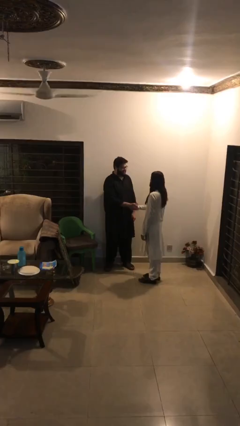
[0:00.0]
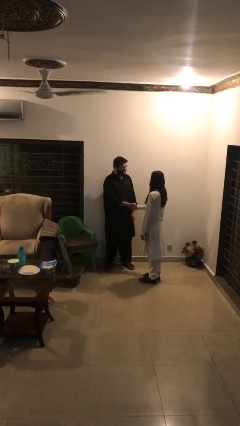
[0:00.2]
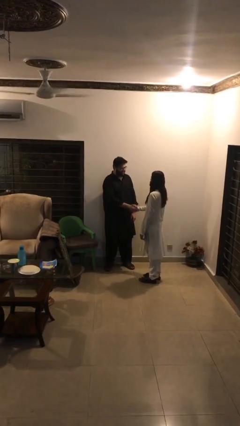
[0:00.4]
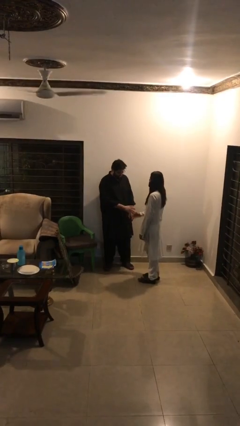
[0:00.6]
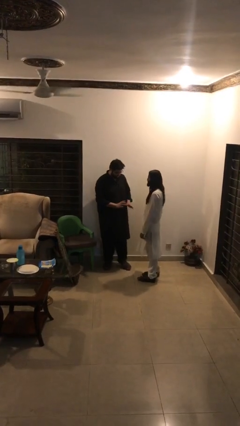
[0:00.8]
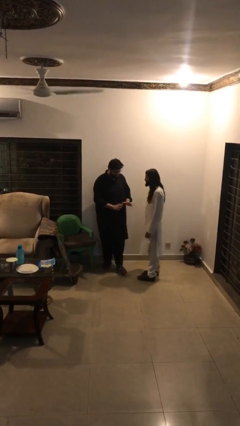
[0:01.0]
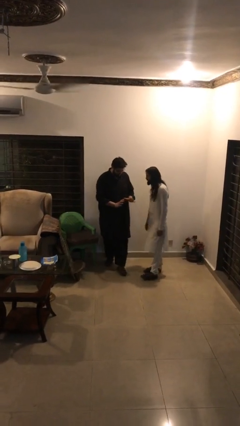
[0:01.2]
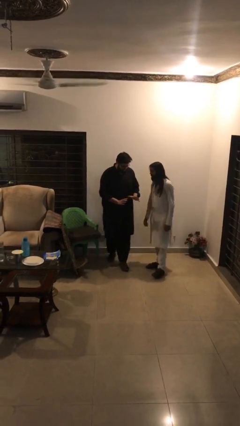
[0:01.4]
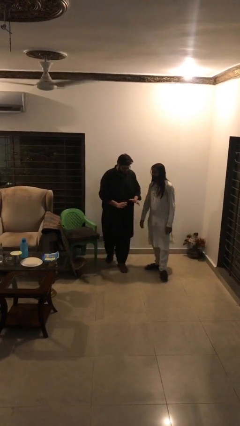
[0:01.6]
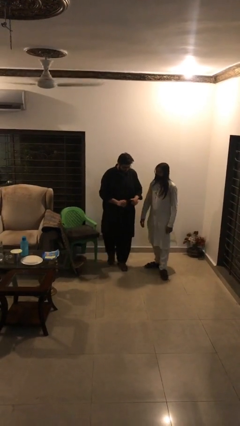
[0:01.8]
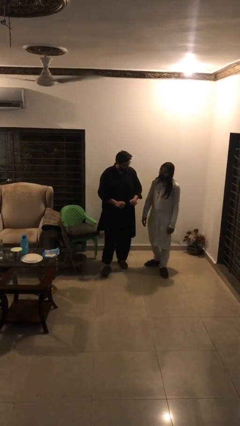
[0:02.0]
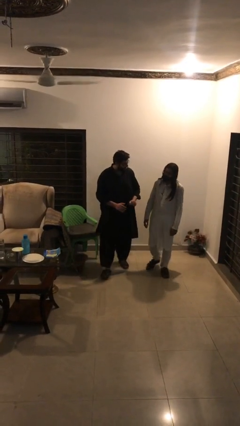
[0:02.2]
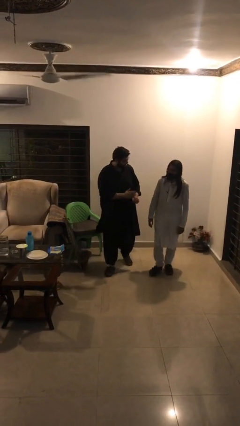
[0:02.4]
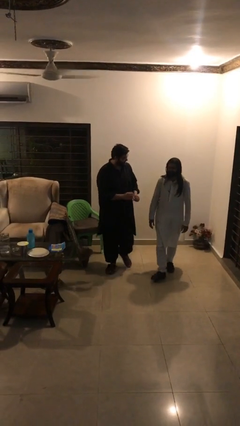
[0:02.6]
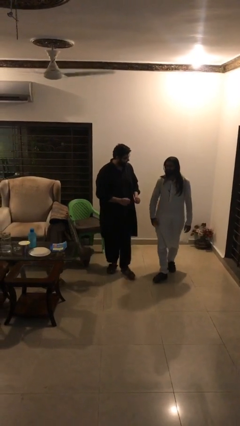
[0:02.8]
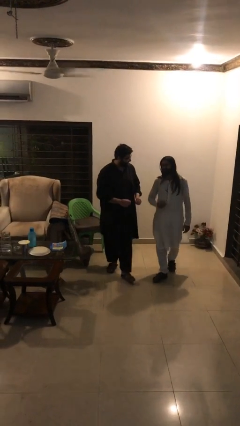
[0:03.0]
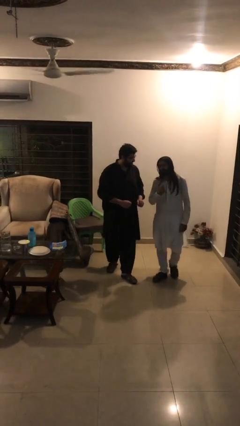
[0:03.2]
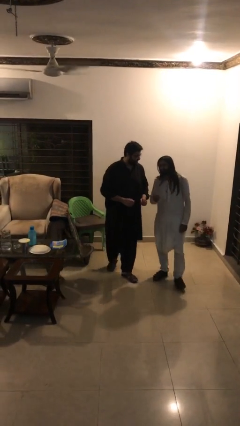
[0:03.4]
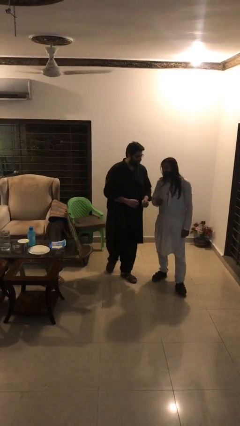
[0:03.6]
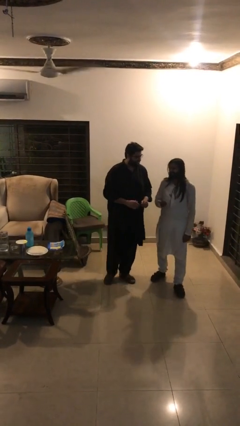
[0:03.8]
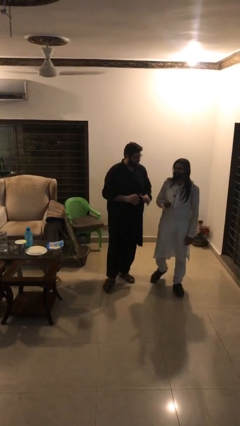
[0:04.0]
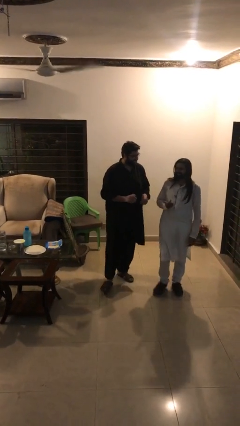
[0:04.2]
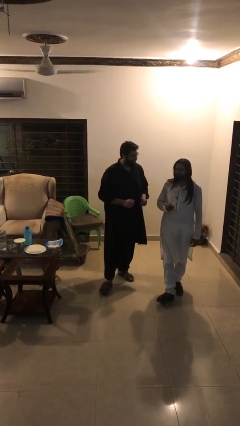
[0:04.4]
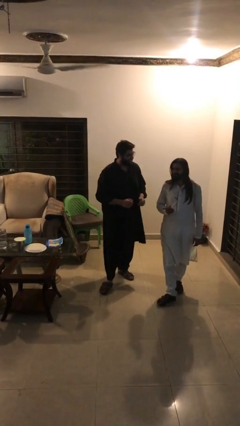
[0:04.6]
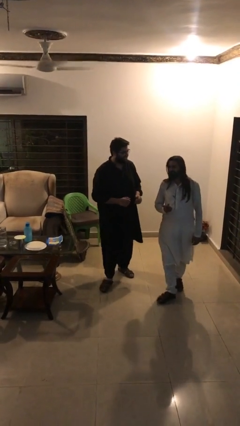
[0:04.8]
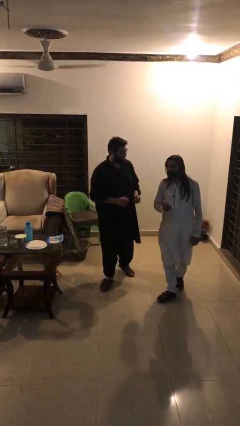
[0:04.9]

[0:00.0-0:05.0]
person talks to person

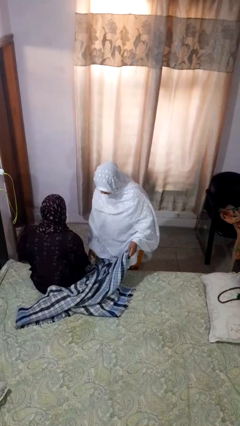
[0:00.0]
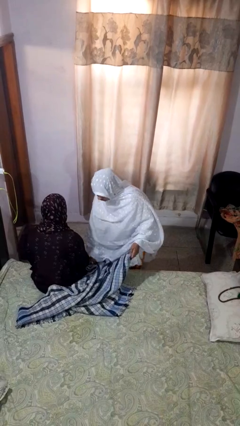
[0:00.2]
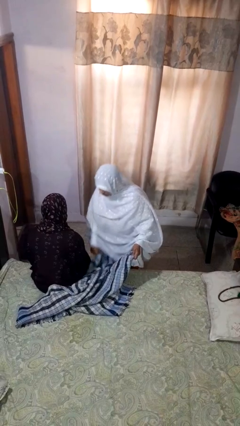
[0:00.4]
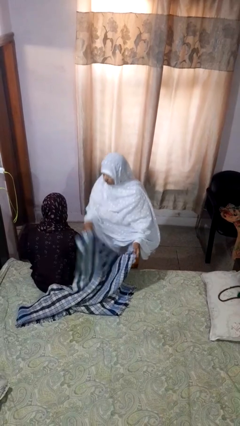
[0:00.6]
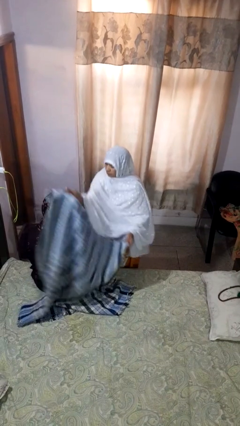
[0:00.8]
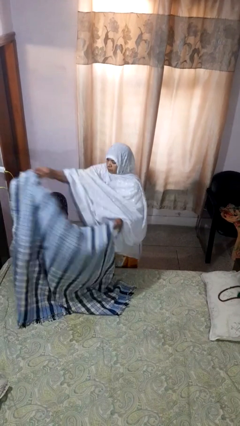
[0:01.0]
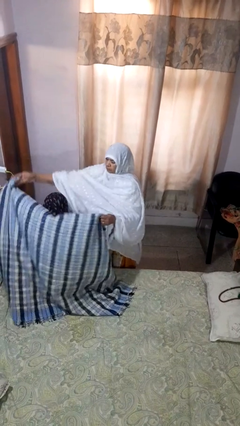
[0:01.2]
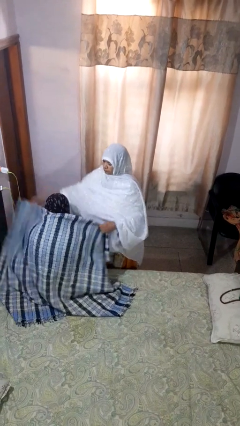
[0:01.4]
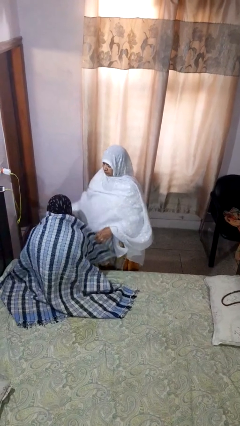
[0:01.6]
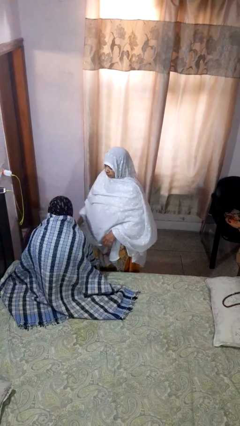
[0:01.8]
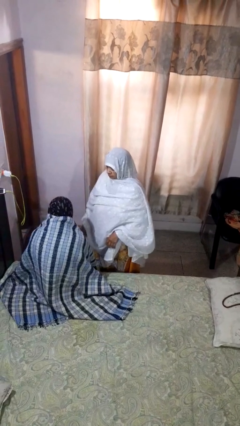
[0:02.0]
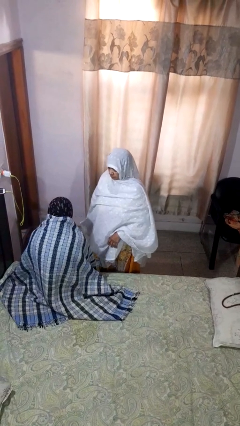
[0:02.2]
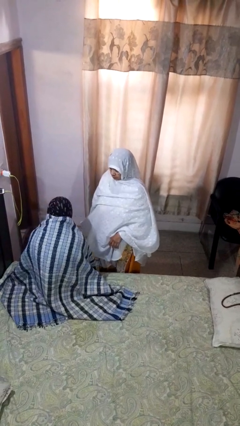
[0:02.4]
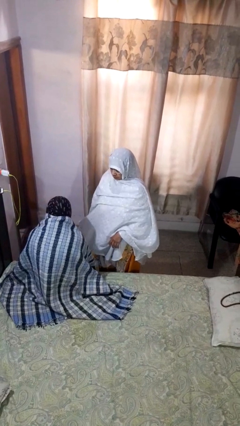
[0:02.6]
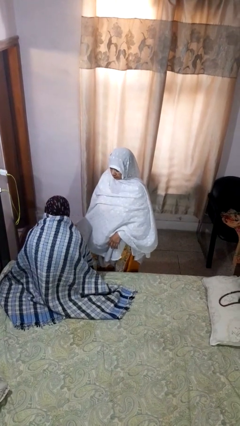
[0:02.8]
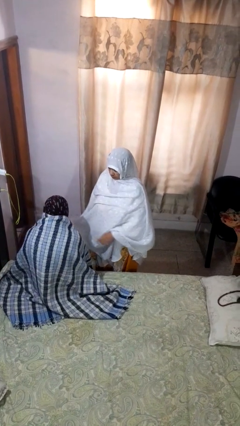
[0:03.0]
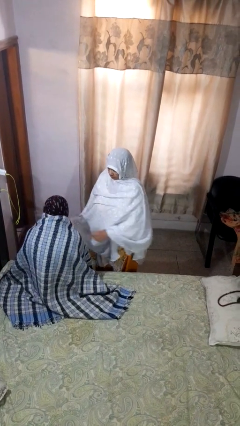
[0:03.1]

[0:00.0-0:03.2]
person covers friend with blanket

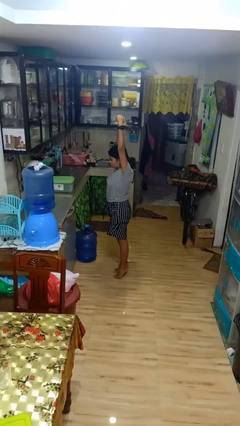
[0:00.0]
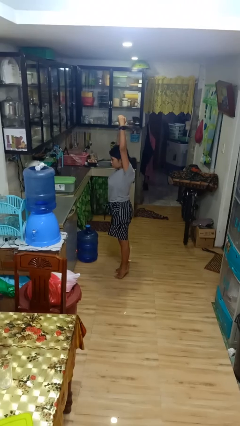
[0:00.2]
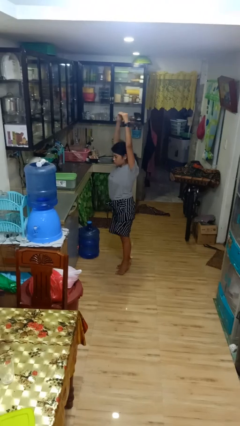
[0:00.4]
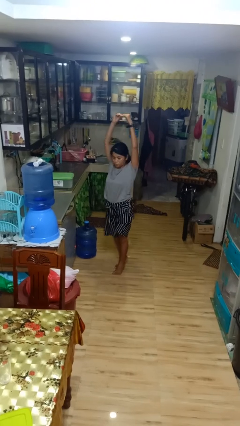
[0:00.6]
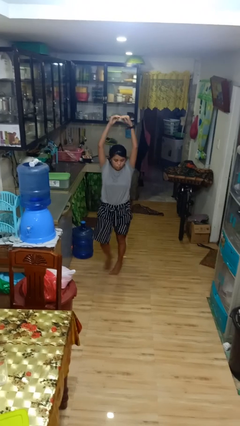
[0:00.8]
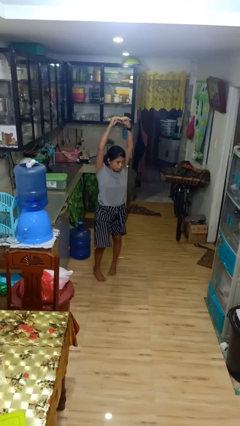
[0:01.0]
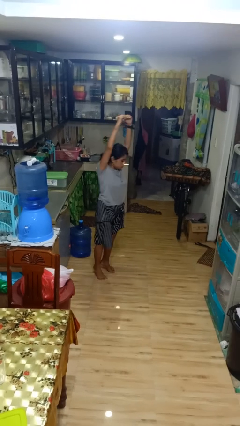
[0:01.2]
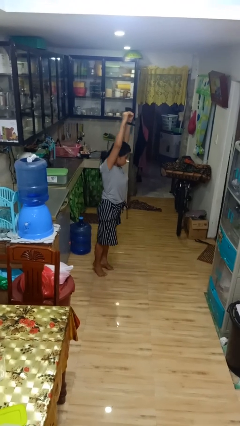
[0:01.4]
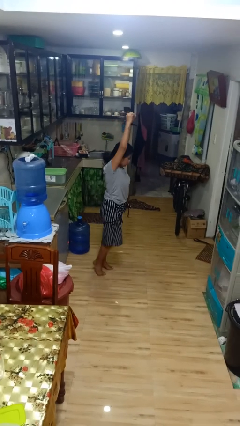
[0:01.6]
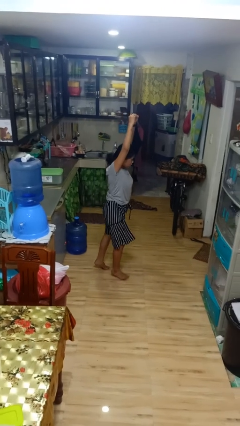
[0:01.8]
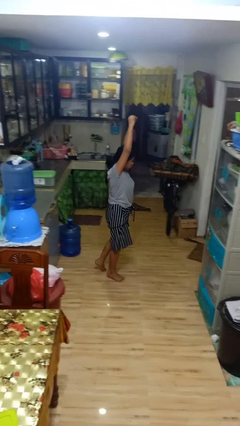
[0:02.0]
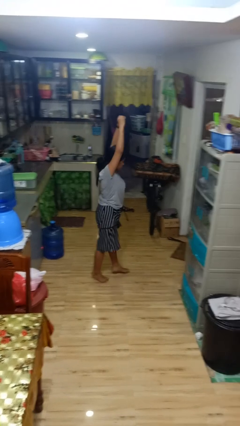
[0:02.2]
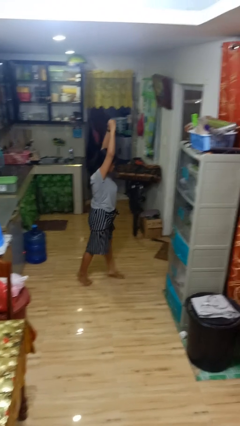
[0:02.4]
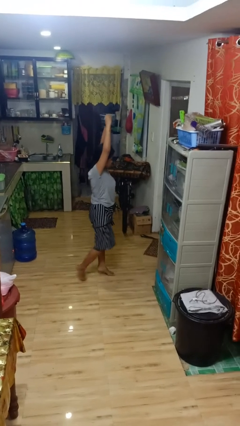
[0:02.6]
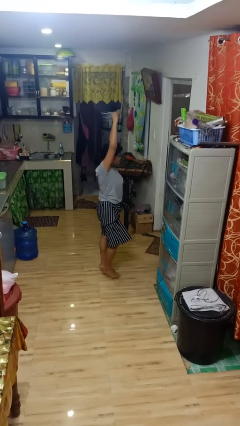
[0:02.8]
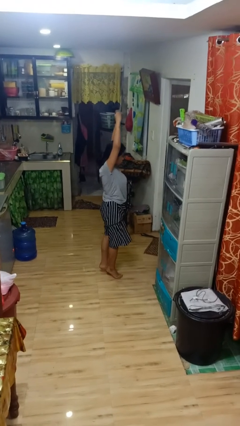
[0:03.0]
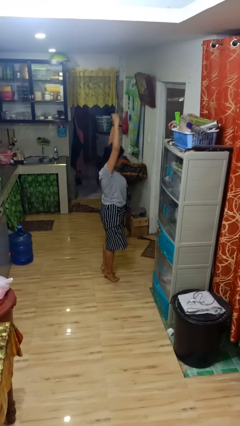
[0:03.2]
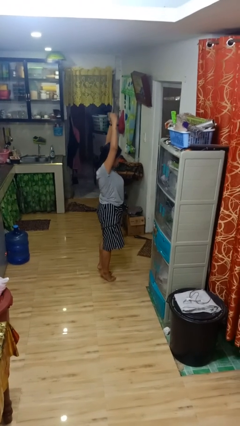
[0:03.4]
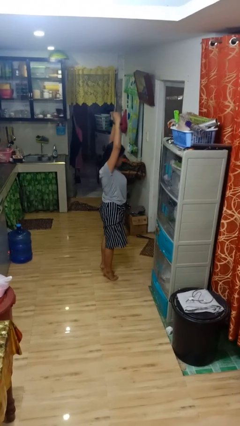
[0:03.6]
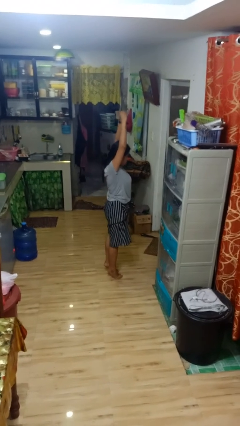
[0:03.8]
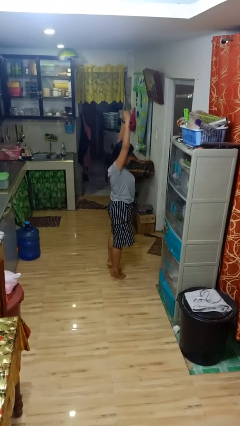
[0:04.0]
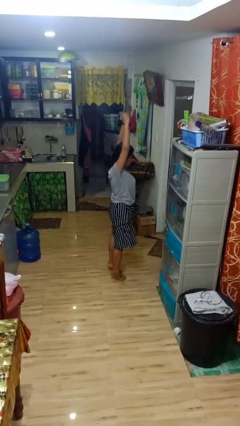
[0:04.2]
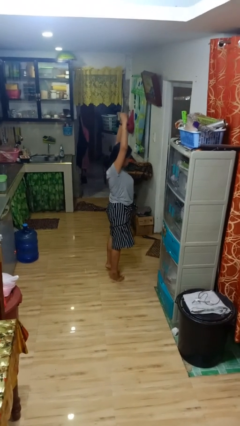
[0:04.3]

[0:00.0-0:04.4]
person walks tiptoe

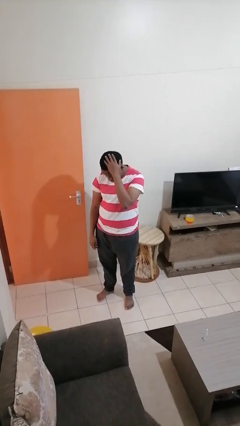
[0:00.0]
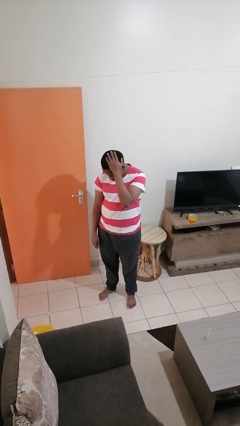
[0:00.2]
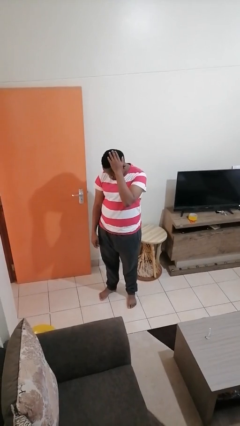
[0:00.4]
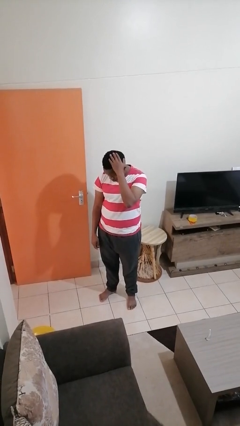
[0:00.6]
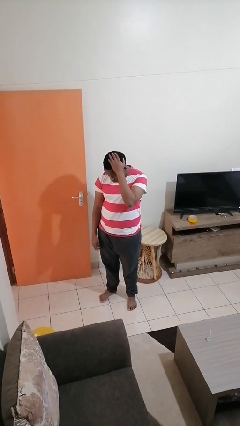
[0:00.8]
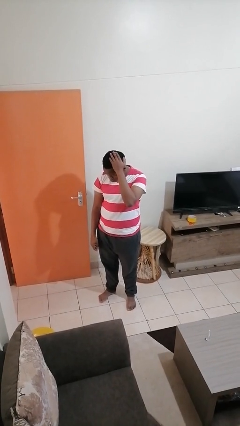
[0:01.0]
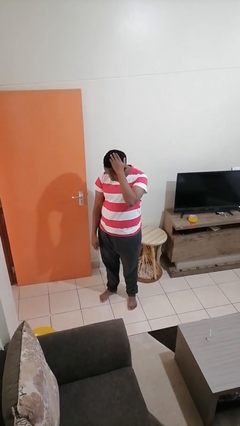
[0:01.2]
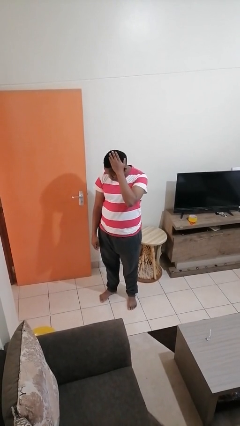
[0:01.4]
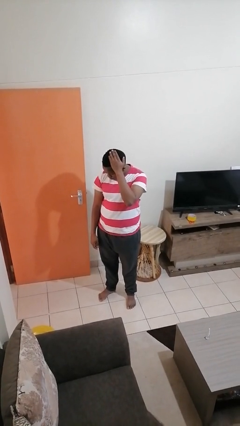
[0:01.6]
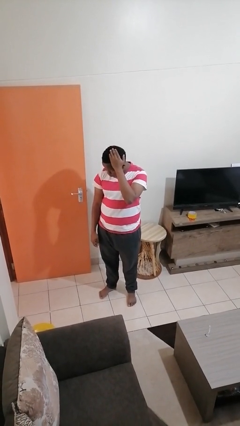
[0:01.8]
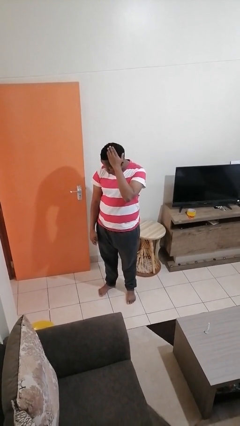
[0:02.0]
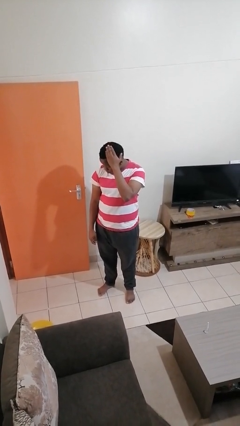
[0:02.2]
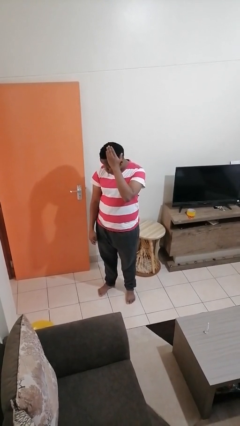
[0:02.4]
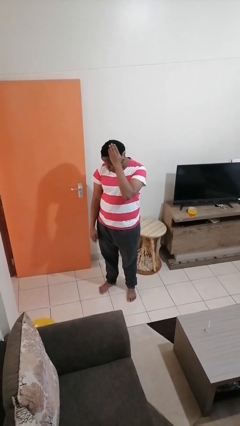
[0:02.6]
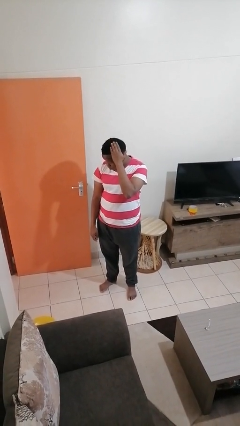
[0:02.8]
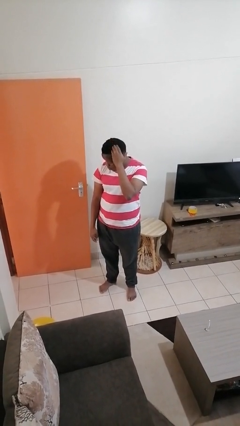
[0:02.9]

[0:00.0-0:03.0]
person pats head

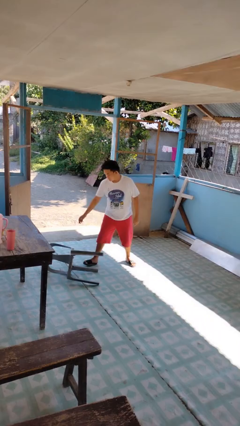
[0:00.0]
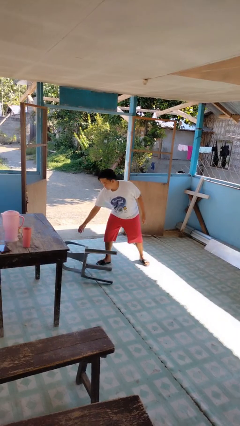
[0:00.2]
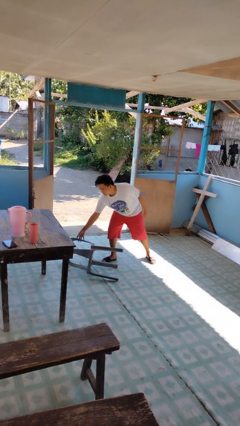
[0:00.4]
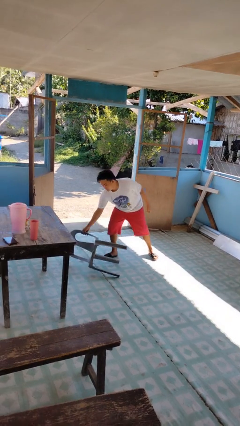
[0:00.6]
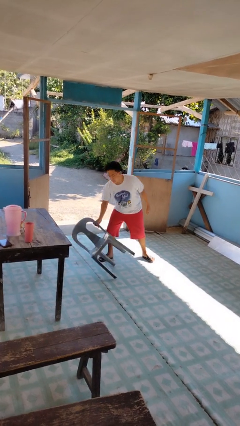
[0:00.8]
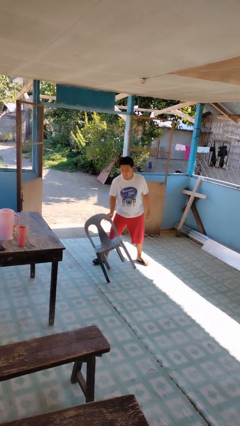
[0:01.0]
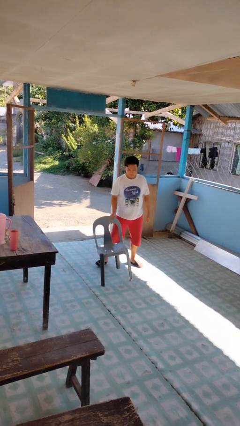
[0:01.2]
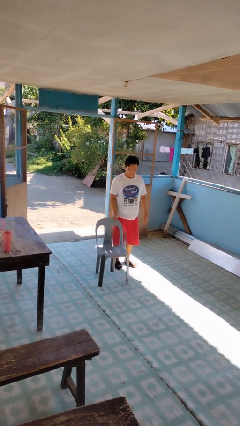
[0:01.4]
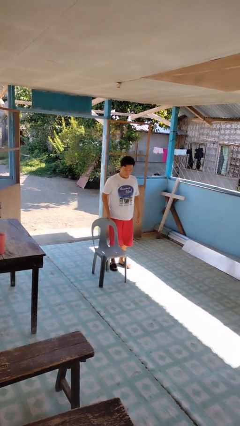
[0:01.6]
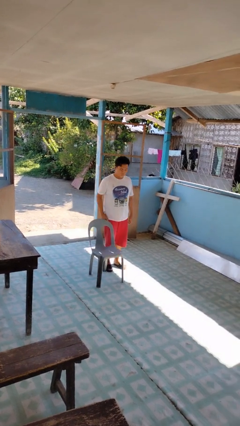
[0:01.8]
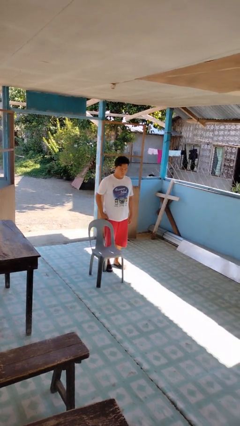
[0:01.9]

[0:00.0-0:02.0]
person sets upright furniture
